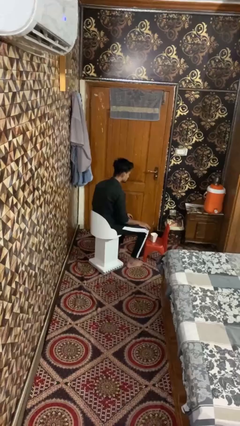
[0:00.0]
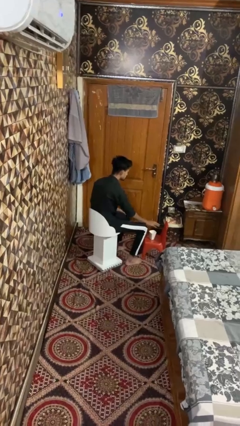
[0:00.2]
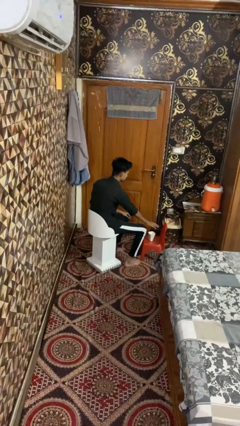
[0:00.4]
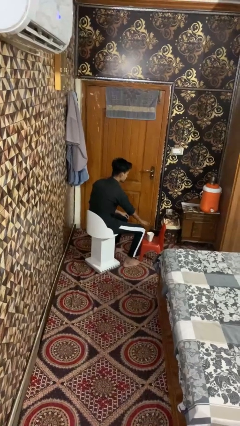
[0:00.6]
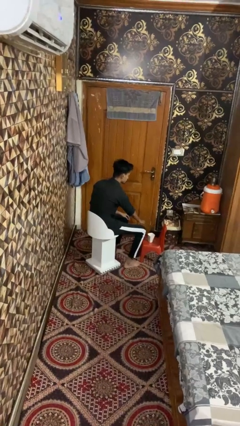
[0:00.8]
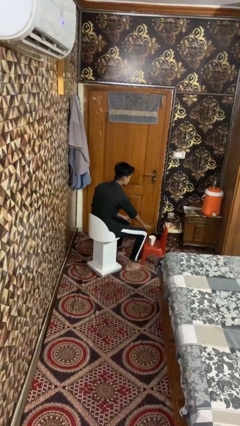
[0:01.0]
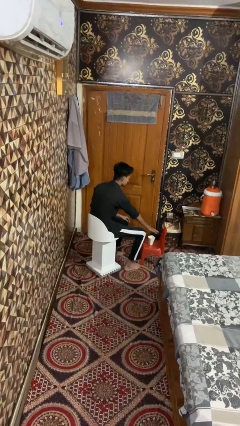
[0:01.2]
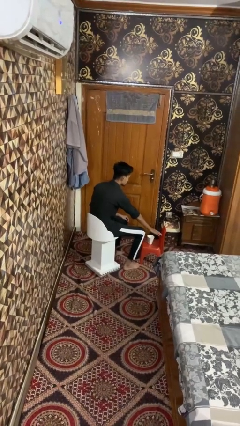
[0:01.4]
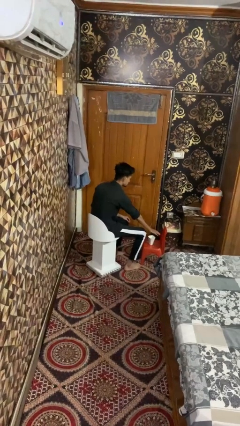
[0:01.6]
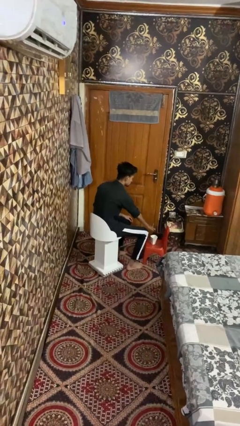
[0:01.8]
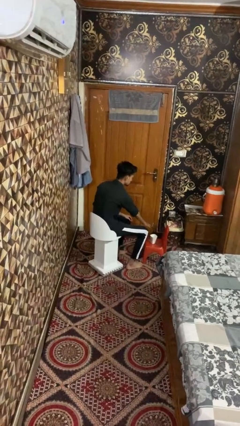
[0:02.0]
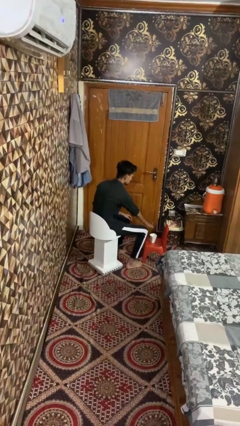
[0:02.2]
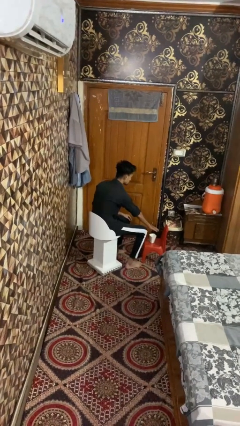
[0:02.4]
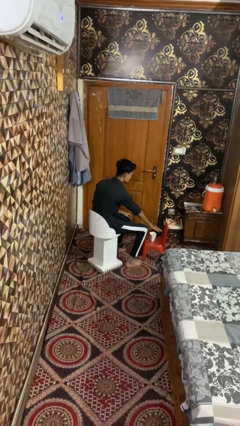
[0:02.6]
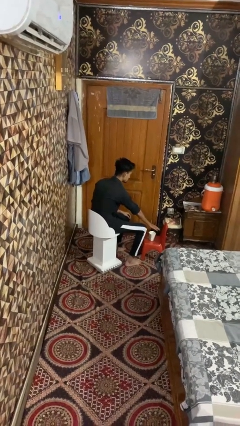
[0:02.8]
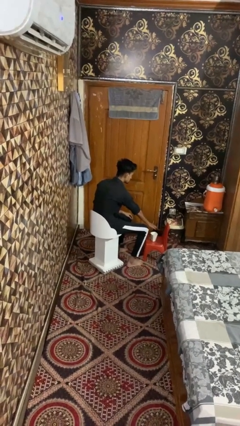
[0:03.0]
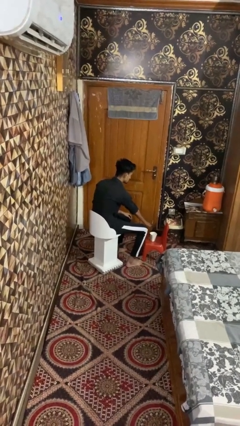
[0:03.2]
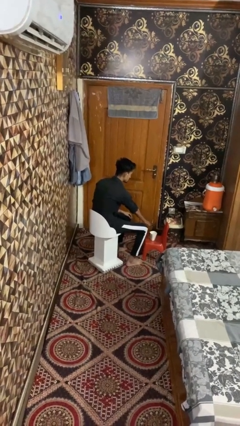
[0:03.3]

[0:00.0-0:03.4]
person waves hand over object

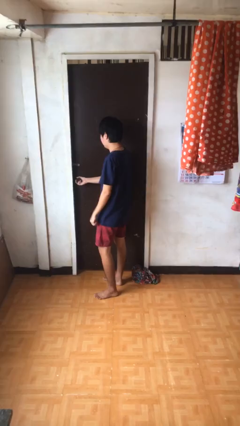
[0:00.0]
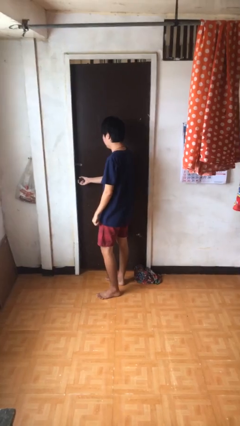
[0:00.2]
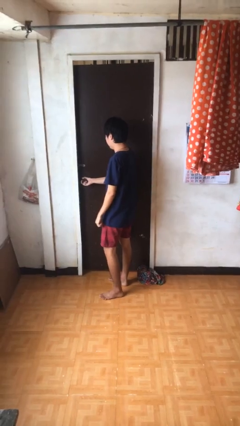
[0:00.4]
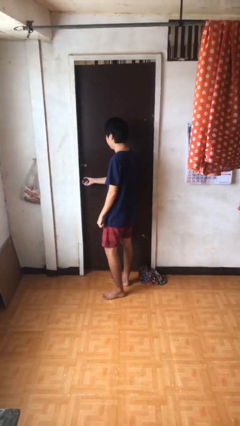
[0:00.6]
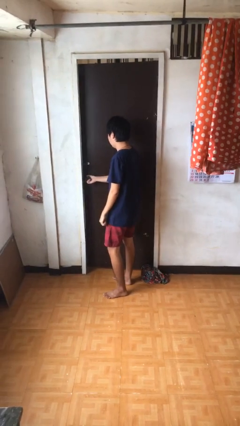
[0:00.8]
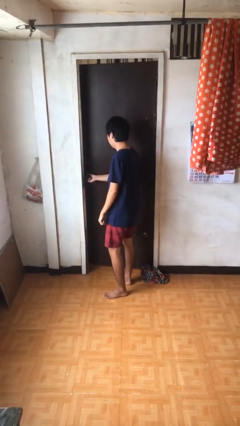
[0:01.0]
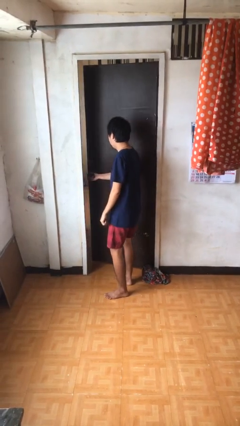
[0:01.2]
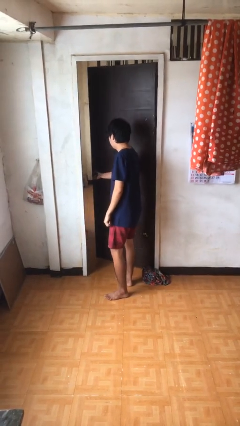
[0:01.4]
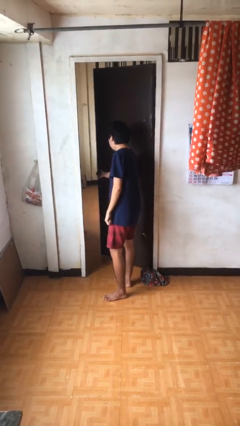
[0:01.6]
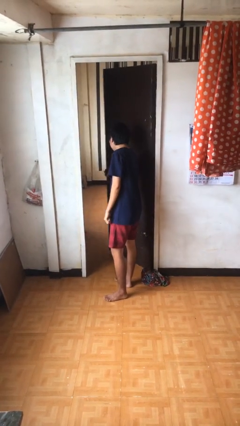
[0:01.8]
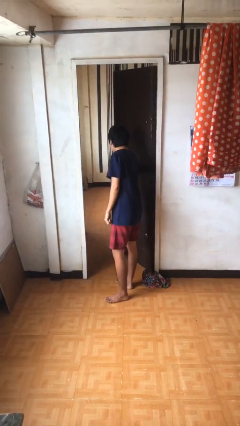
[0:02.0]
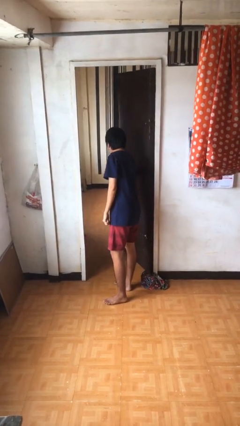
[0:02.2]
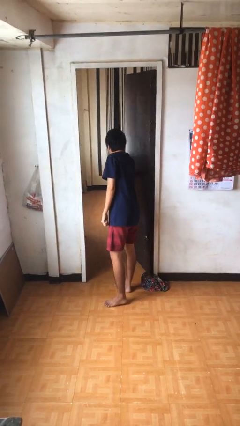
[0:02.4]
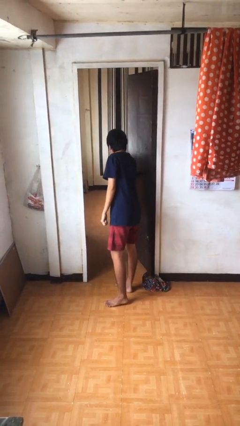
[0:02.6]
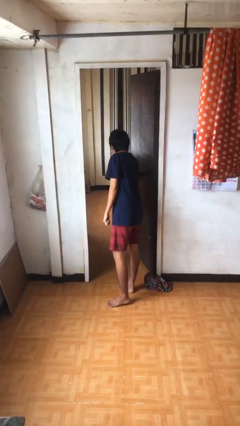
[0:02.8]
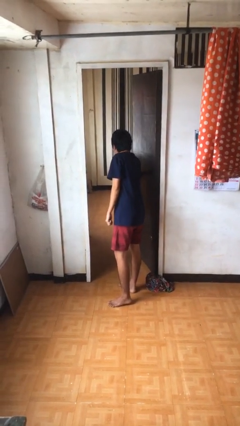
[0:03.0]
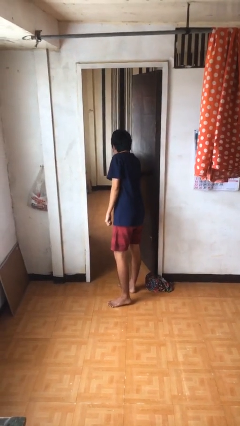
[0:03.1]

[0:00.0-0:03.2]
person opens facility door

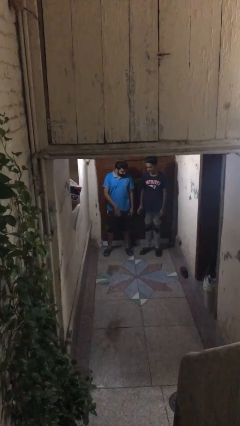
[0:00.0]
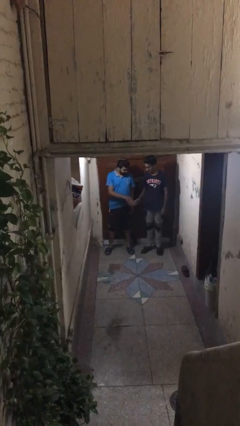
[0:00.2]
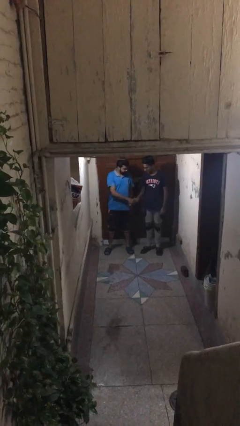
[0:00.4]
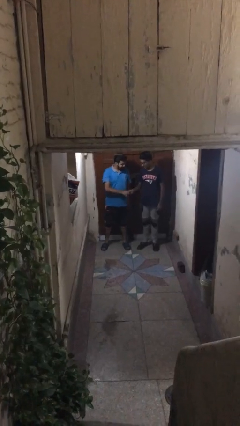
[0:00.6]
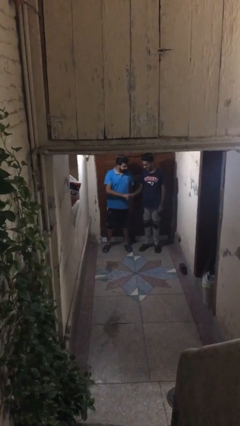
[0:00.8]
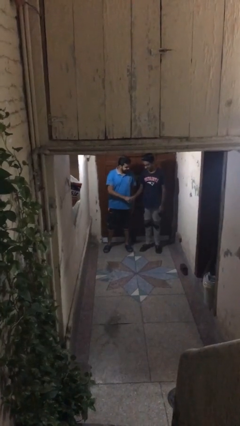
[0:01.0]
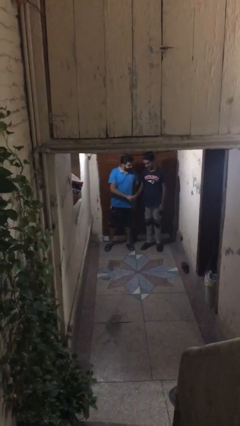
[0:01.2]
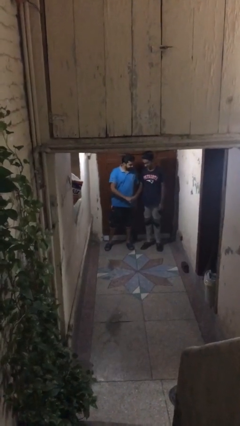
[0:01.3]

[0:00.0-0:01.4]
person shakes hand

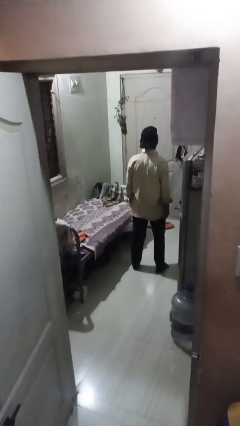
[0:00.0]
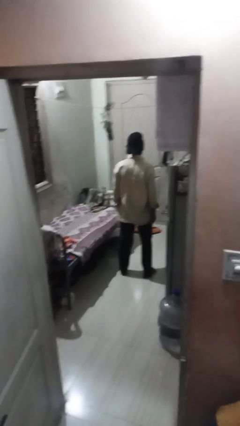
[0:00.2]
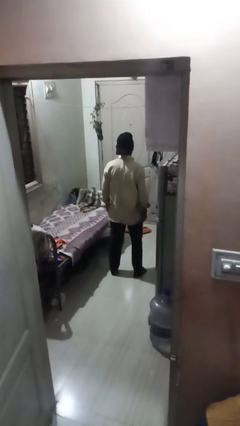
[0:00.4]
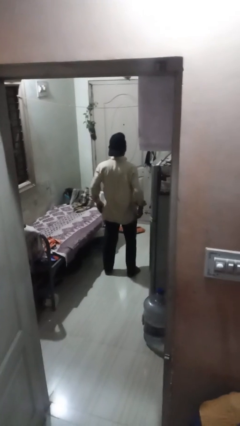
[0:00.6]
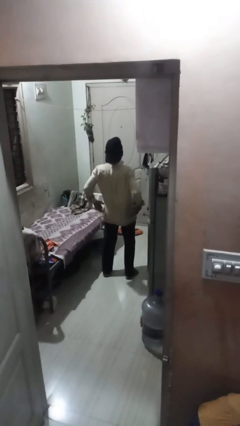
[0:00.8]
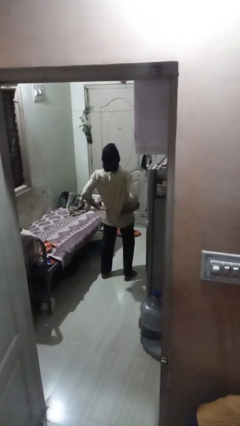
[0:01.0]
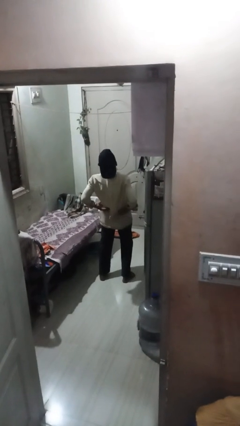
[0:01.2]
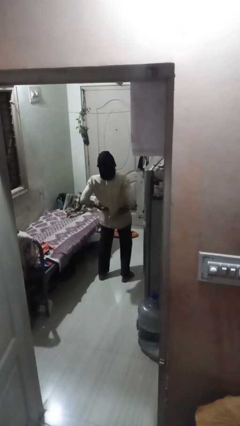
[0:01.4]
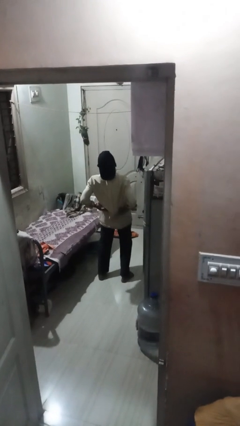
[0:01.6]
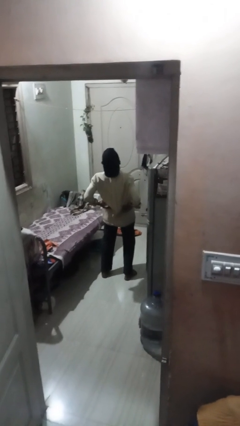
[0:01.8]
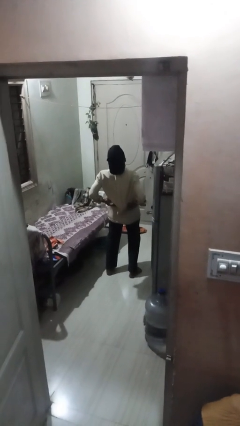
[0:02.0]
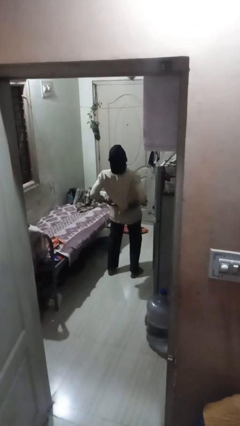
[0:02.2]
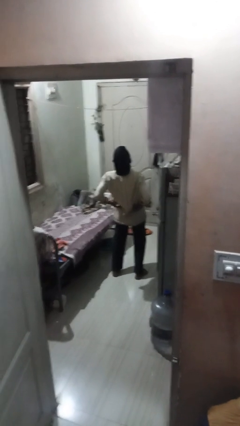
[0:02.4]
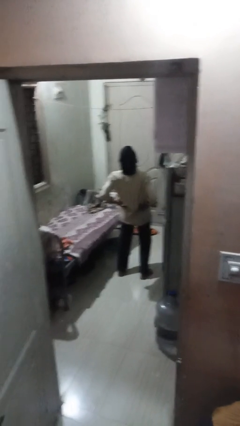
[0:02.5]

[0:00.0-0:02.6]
person stretches back

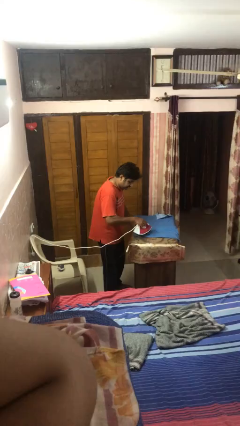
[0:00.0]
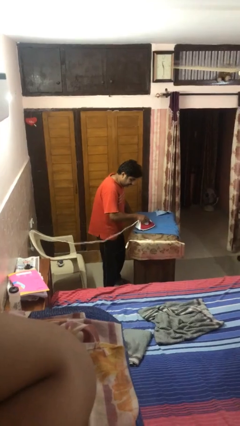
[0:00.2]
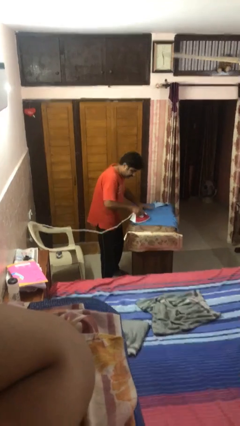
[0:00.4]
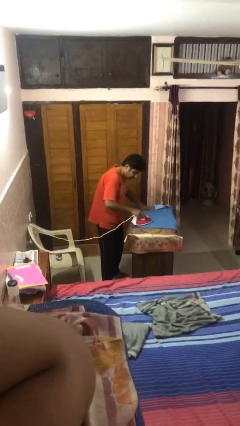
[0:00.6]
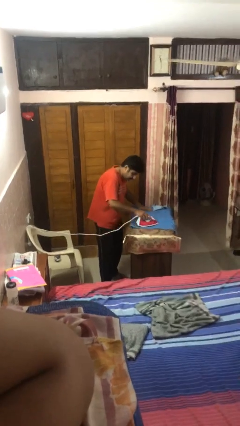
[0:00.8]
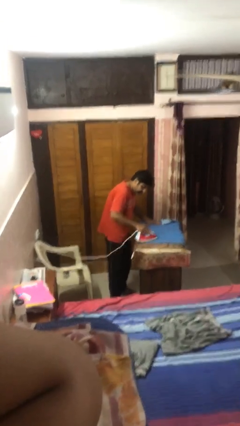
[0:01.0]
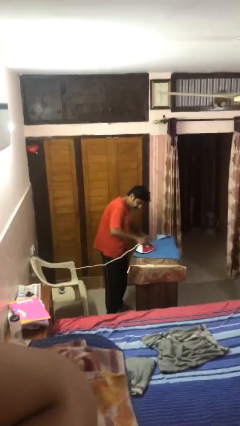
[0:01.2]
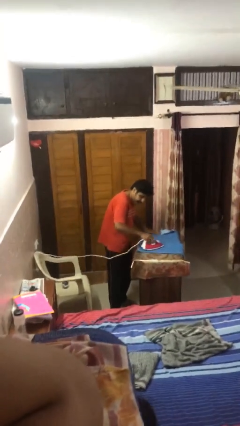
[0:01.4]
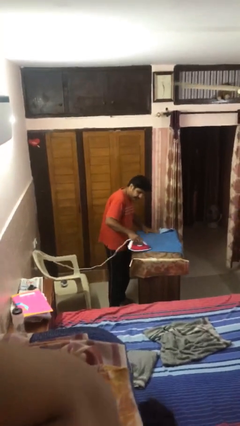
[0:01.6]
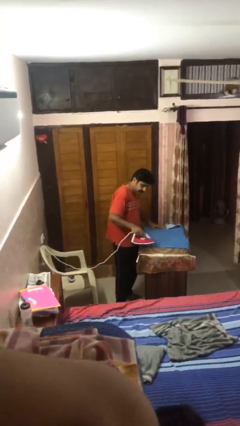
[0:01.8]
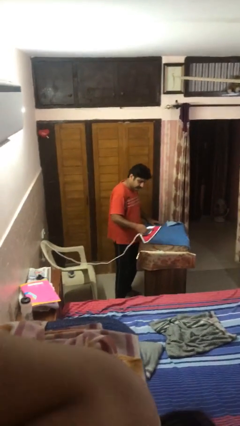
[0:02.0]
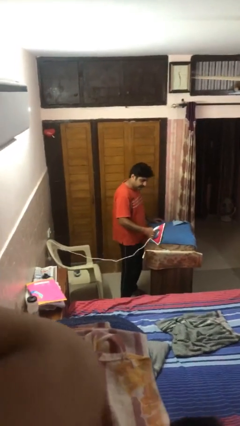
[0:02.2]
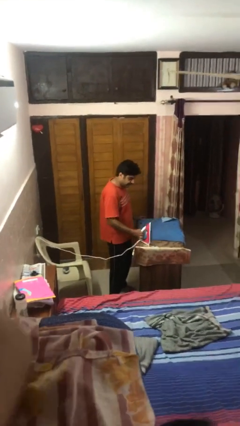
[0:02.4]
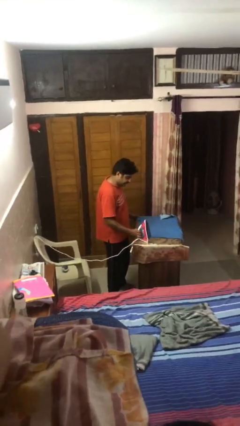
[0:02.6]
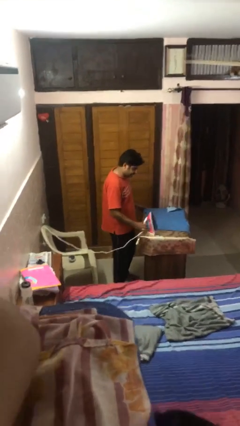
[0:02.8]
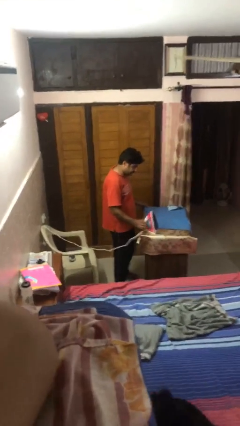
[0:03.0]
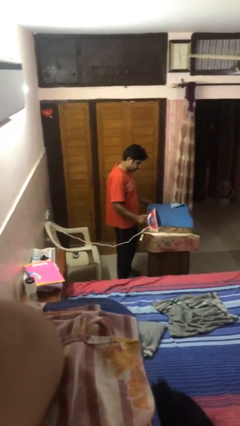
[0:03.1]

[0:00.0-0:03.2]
person irons clothes

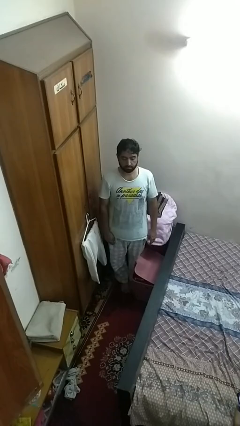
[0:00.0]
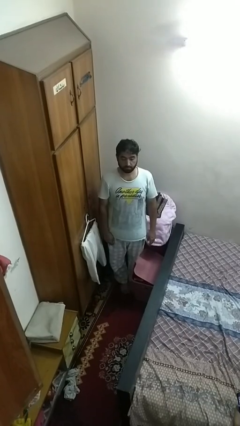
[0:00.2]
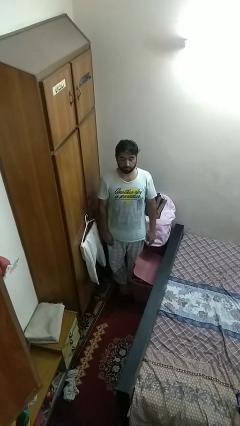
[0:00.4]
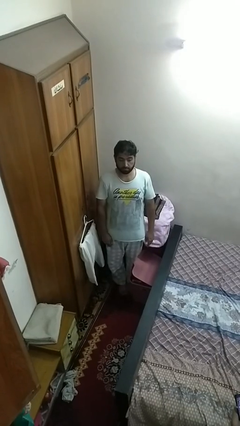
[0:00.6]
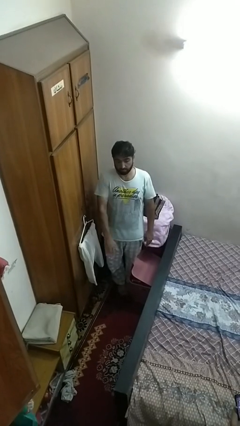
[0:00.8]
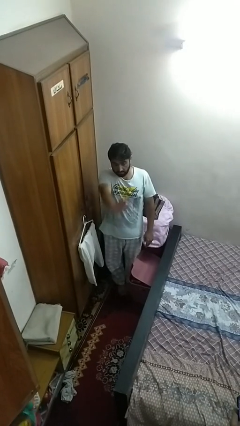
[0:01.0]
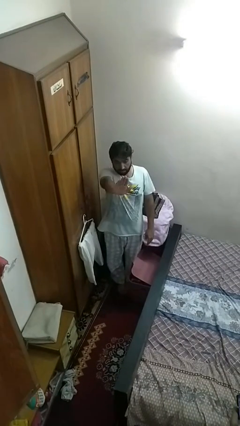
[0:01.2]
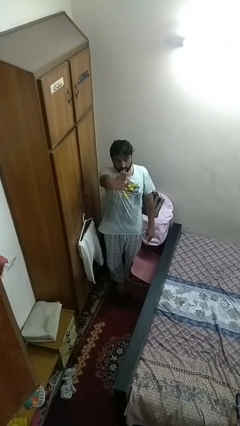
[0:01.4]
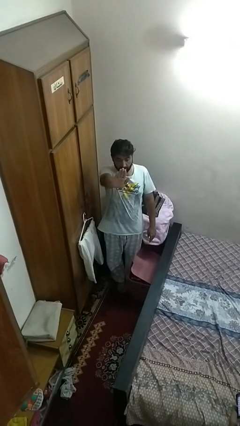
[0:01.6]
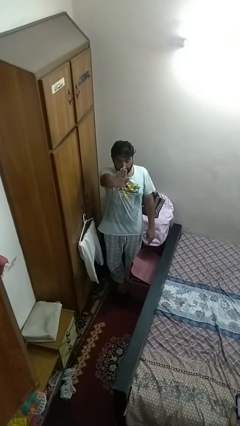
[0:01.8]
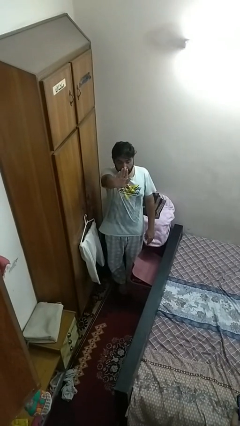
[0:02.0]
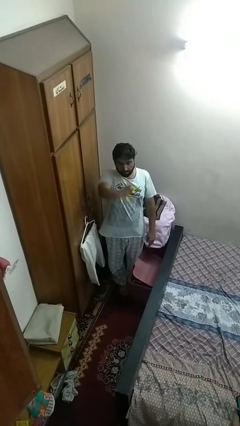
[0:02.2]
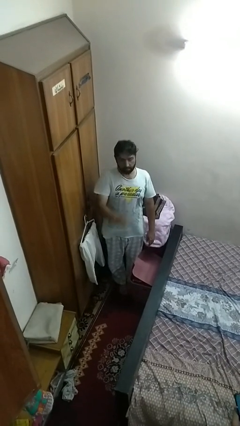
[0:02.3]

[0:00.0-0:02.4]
person gestures stop

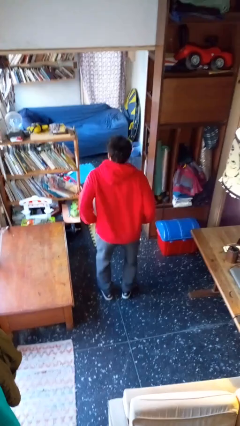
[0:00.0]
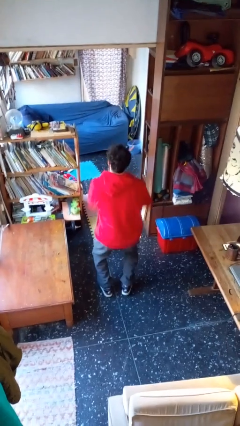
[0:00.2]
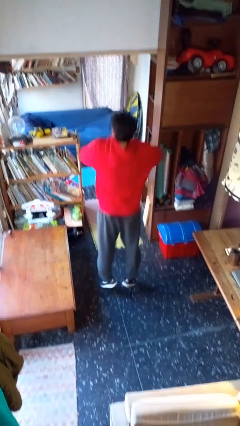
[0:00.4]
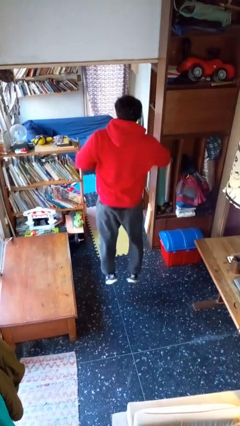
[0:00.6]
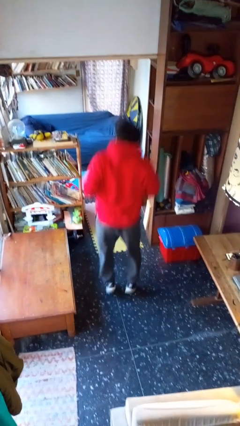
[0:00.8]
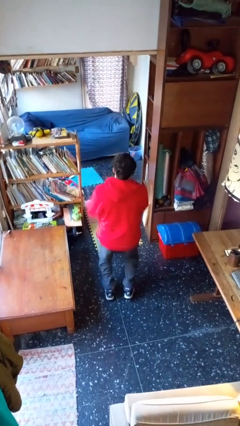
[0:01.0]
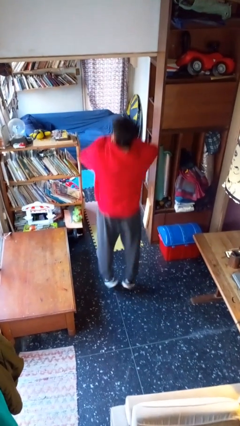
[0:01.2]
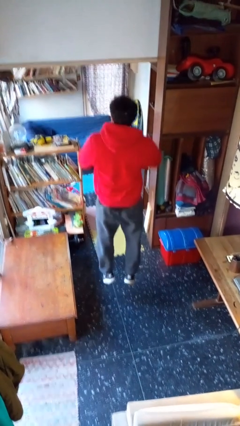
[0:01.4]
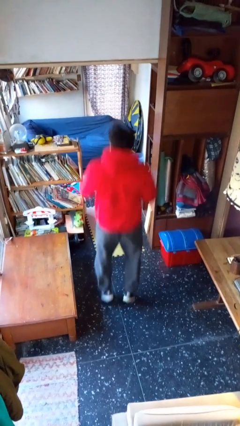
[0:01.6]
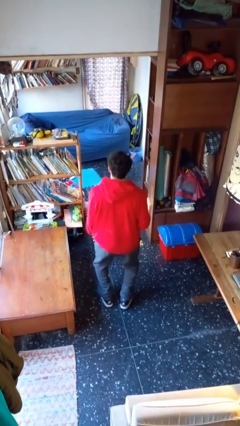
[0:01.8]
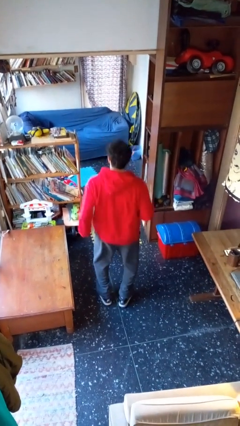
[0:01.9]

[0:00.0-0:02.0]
person jumps
